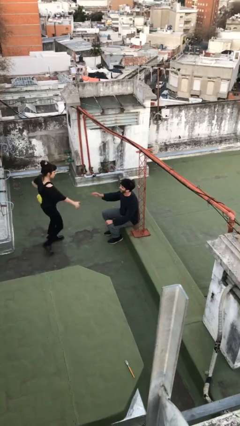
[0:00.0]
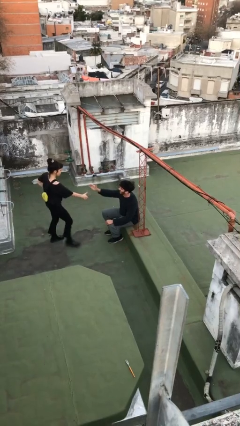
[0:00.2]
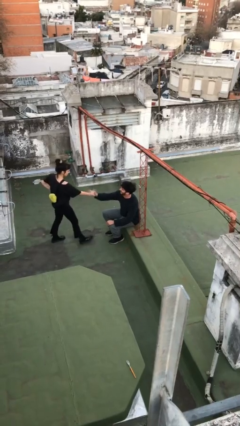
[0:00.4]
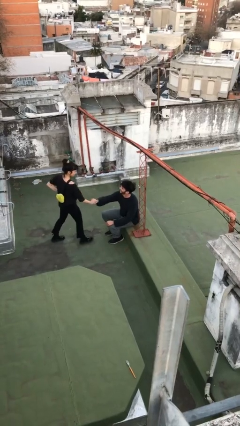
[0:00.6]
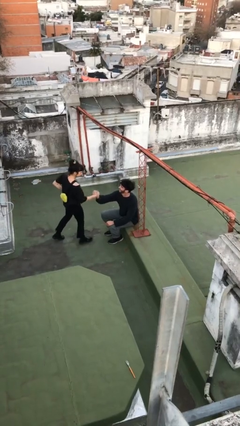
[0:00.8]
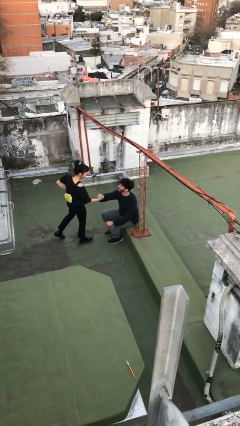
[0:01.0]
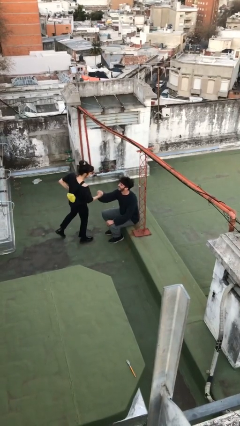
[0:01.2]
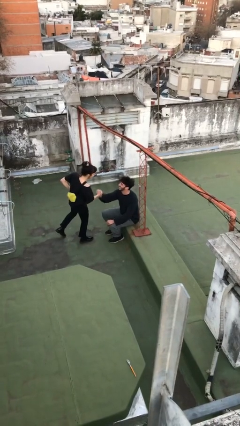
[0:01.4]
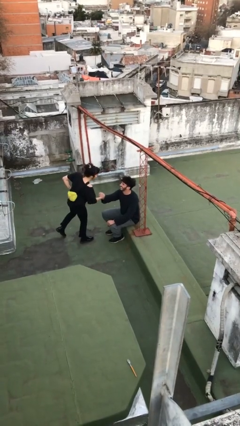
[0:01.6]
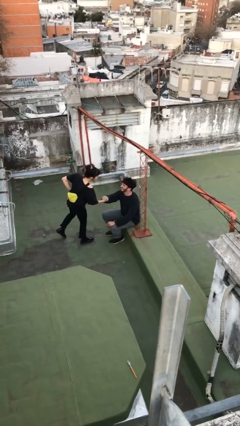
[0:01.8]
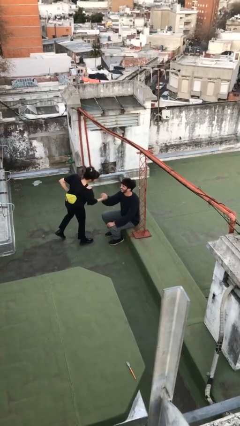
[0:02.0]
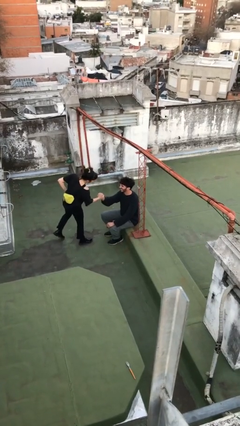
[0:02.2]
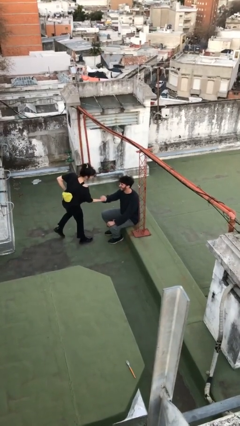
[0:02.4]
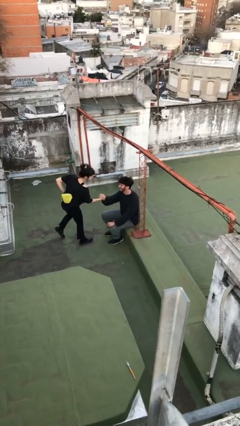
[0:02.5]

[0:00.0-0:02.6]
person shakes hand

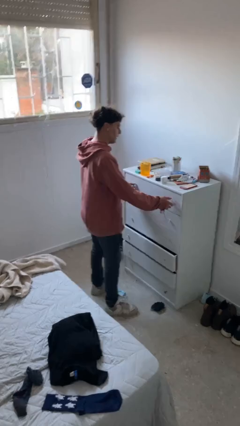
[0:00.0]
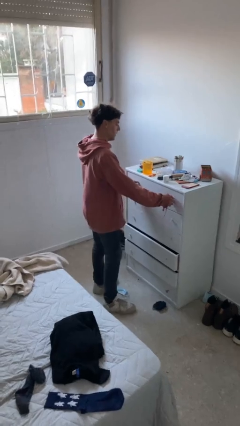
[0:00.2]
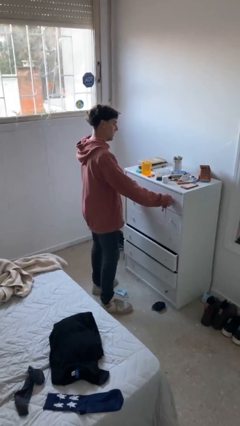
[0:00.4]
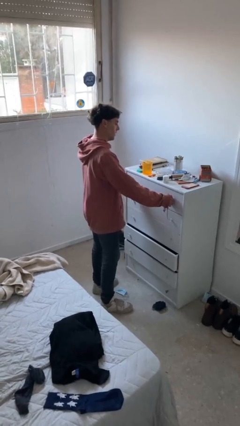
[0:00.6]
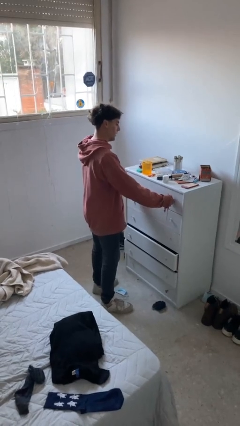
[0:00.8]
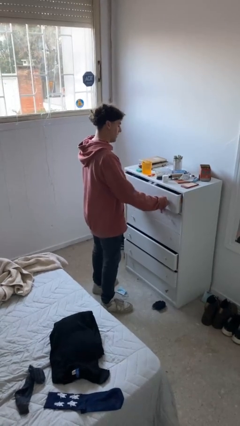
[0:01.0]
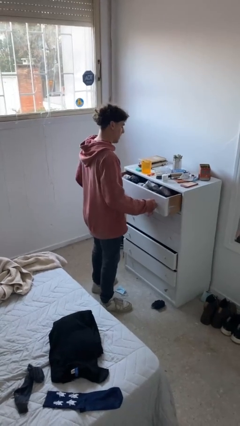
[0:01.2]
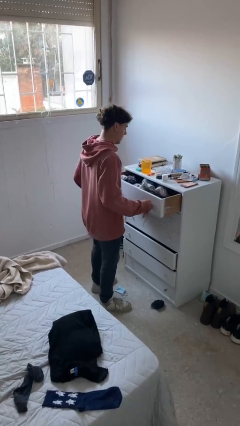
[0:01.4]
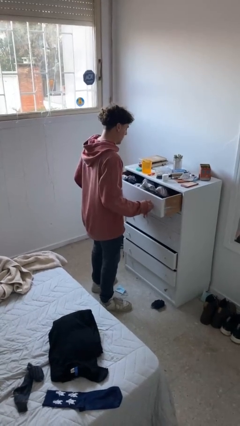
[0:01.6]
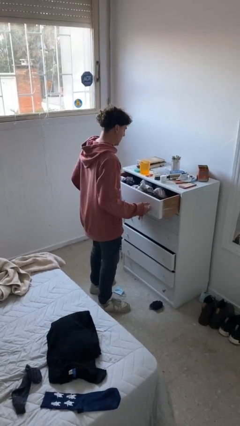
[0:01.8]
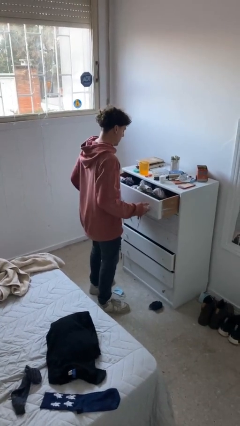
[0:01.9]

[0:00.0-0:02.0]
person opens dresser drawer

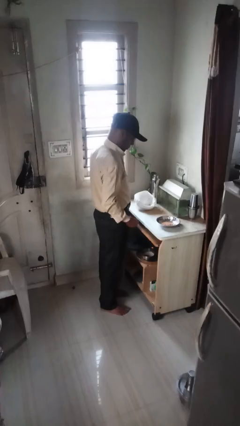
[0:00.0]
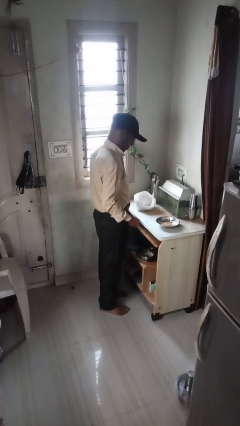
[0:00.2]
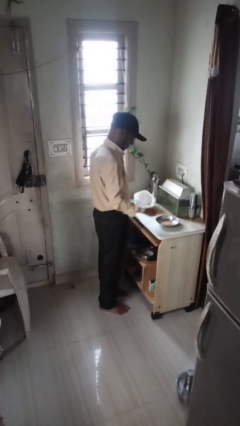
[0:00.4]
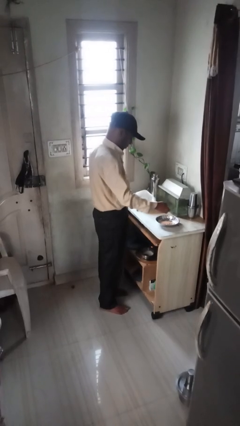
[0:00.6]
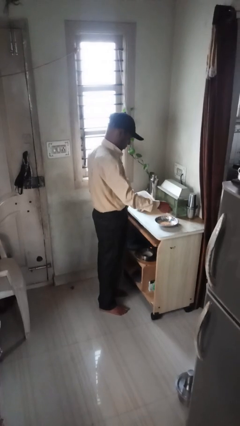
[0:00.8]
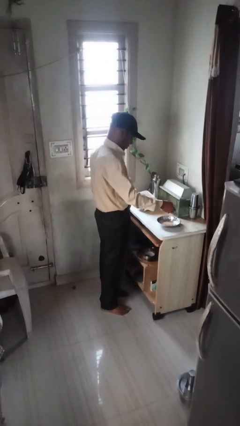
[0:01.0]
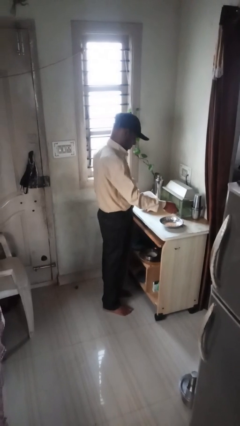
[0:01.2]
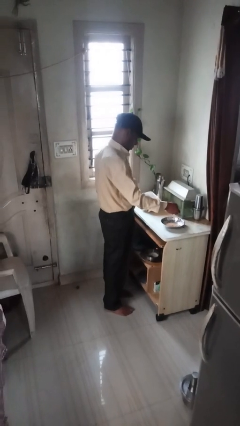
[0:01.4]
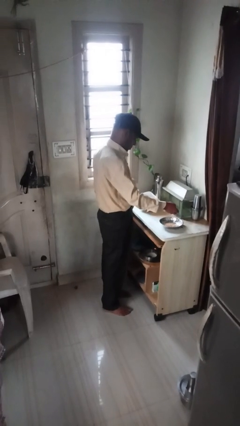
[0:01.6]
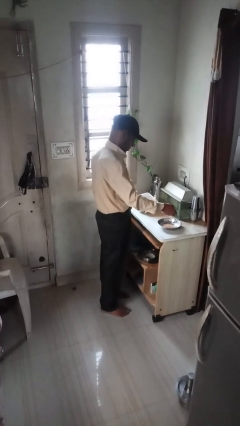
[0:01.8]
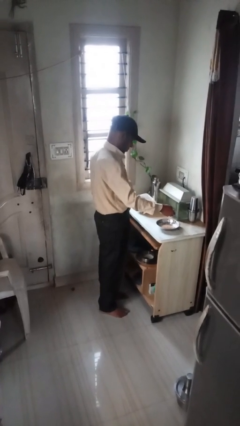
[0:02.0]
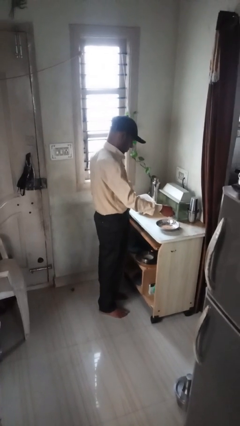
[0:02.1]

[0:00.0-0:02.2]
person pours into bowl

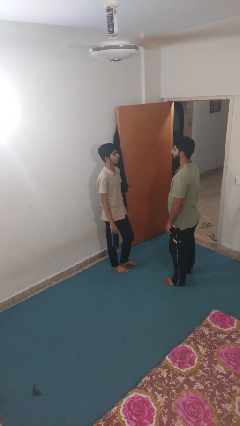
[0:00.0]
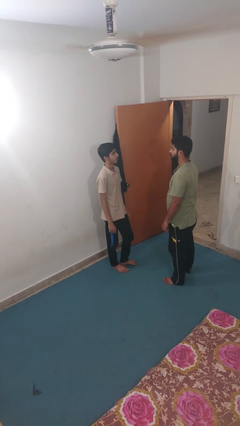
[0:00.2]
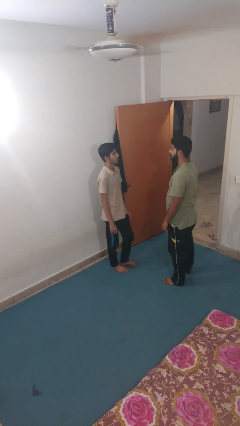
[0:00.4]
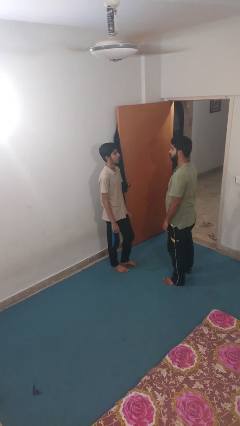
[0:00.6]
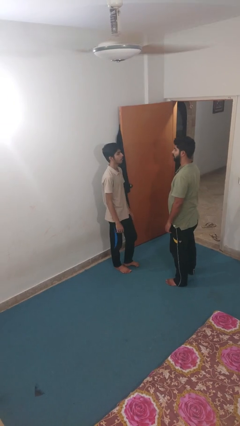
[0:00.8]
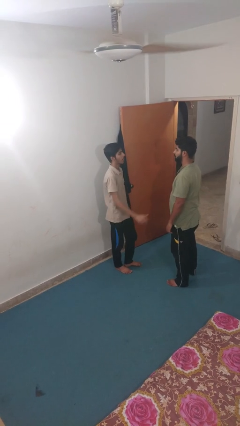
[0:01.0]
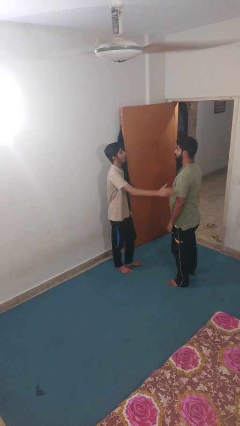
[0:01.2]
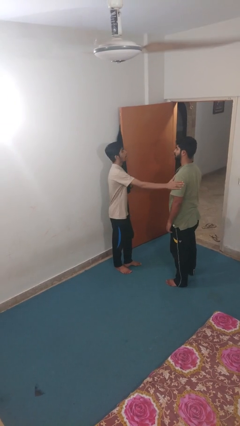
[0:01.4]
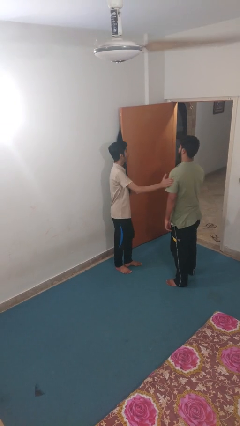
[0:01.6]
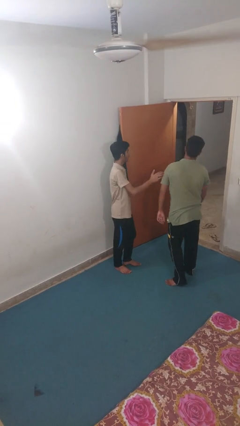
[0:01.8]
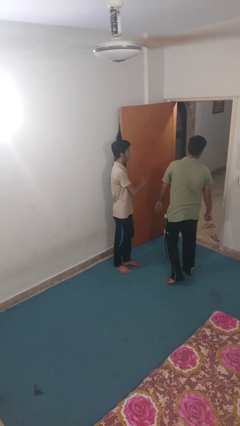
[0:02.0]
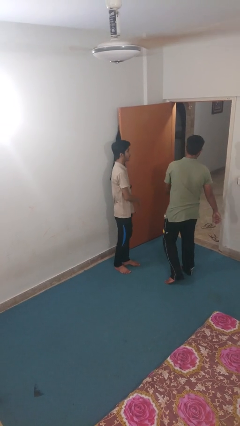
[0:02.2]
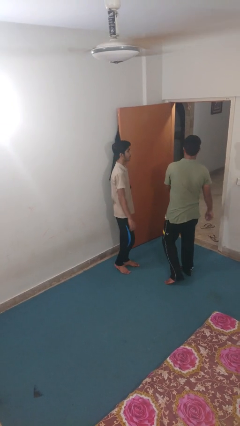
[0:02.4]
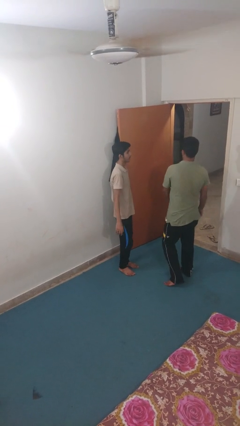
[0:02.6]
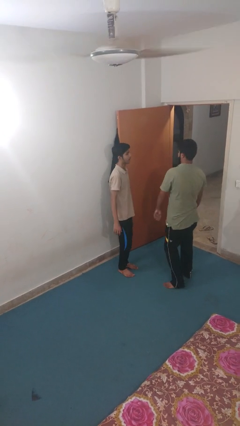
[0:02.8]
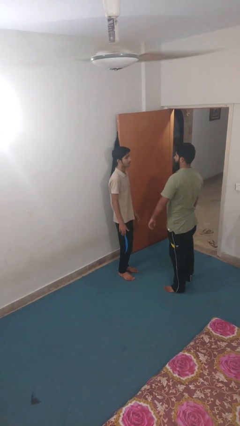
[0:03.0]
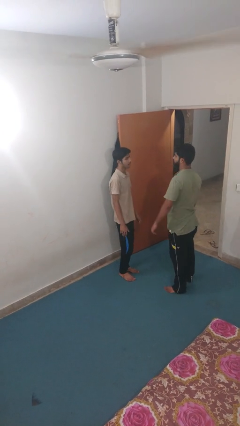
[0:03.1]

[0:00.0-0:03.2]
person shoves person

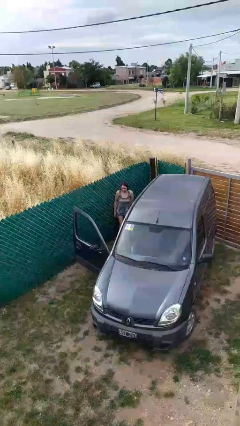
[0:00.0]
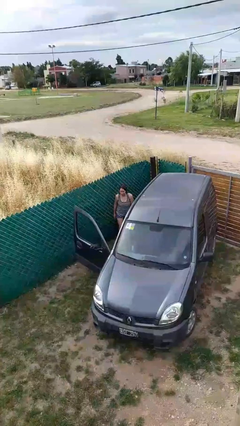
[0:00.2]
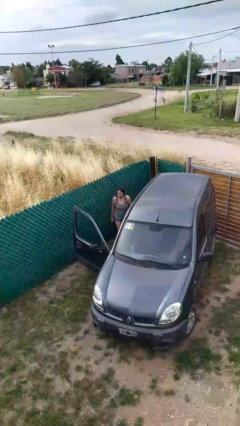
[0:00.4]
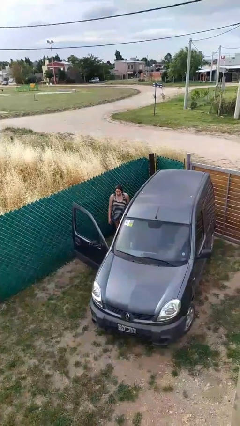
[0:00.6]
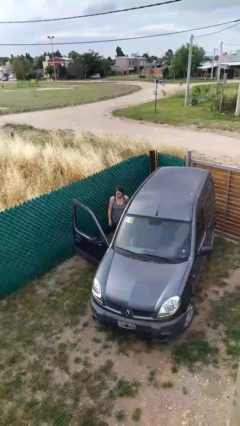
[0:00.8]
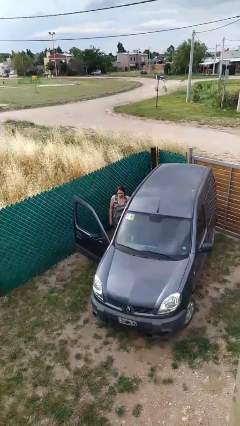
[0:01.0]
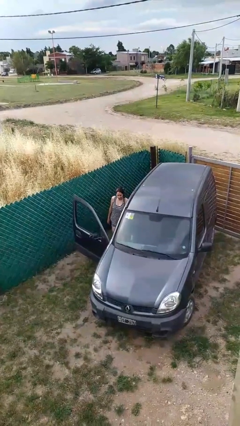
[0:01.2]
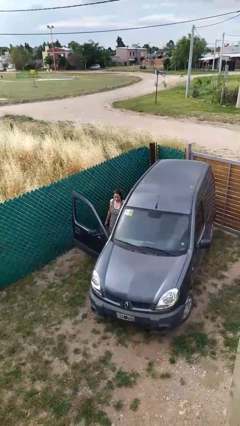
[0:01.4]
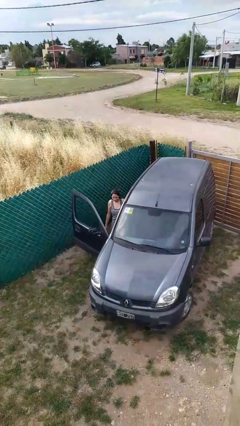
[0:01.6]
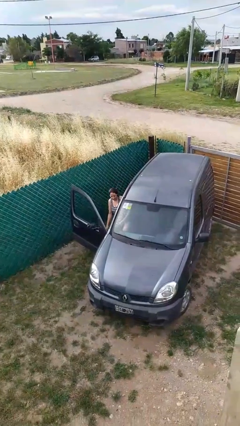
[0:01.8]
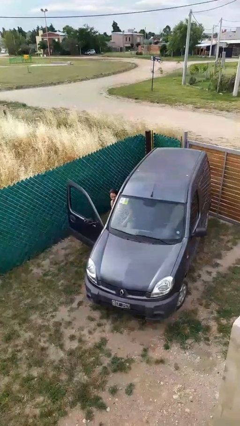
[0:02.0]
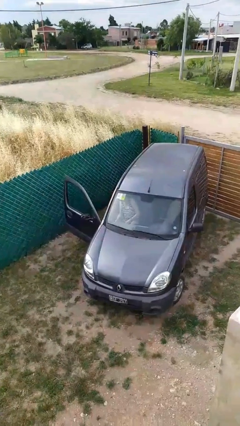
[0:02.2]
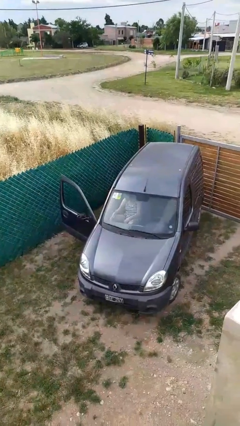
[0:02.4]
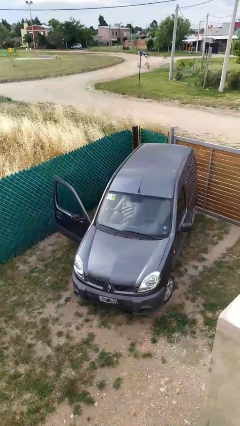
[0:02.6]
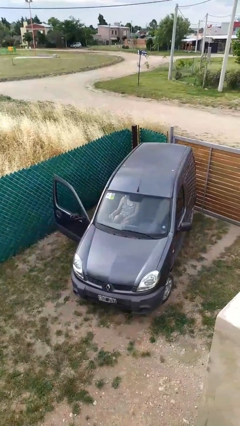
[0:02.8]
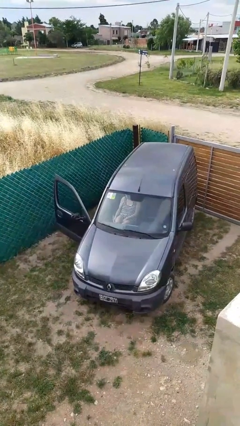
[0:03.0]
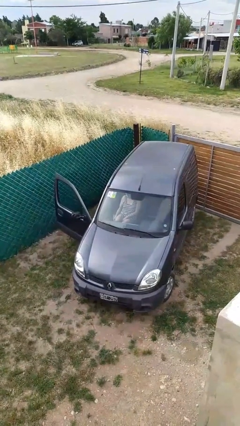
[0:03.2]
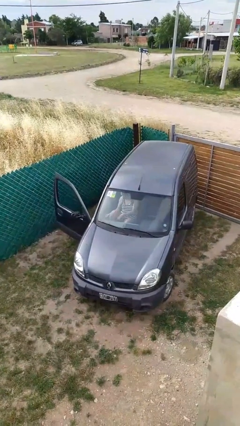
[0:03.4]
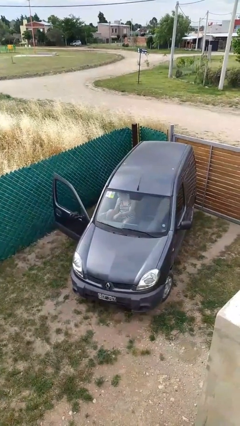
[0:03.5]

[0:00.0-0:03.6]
person enters car

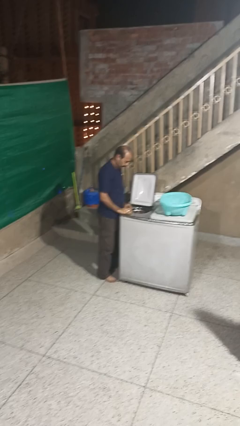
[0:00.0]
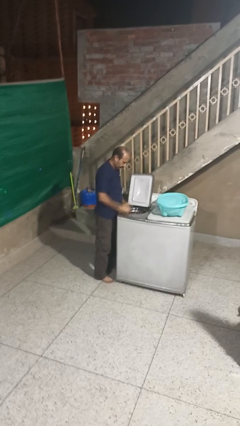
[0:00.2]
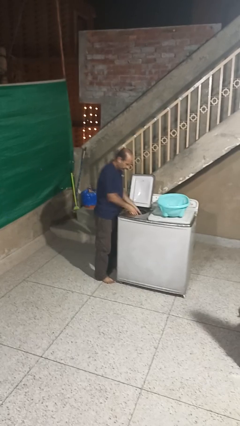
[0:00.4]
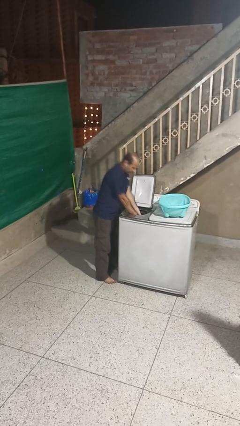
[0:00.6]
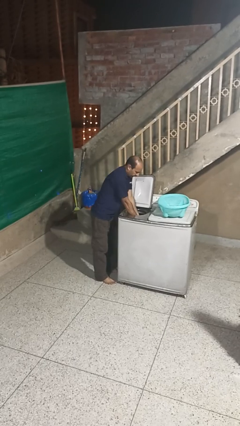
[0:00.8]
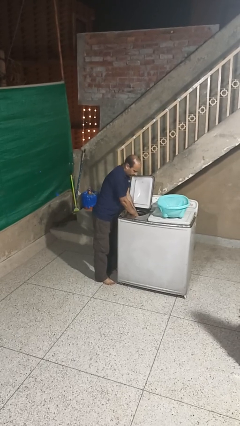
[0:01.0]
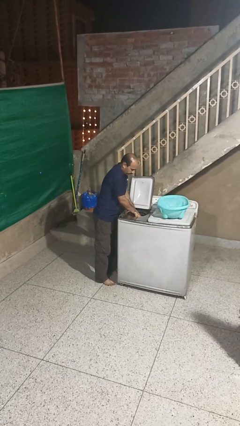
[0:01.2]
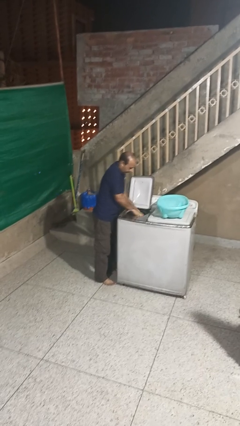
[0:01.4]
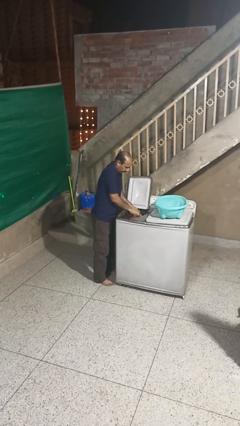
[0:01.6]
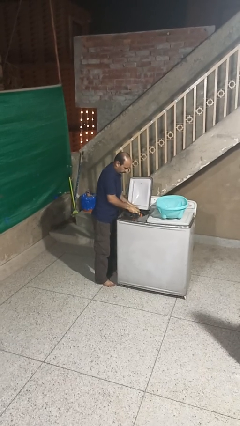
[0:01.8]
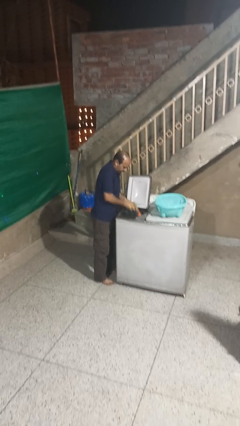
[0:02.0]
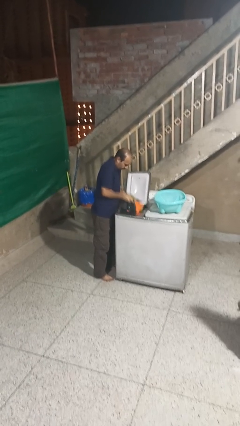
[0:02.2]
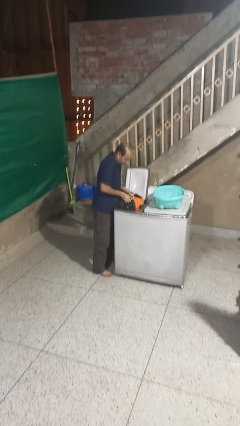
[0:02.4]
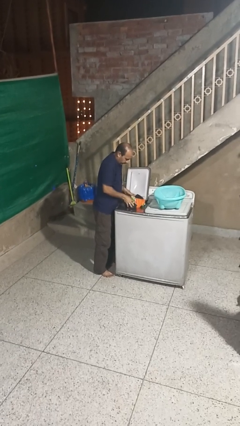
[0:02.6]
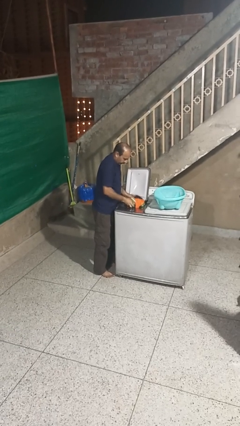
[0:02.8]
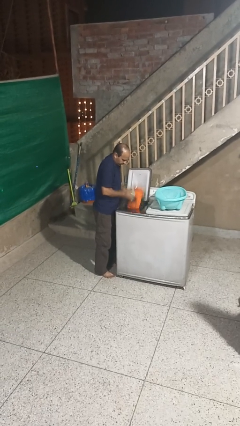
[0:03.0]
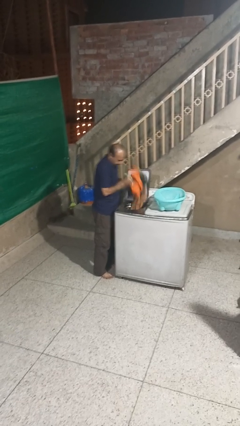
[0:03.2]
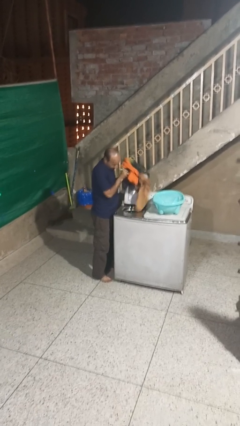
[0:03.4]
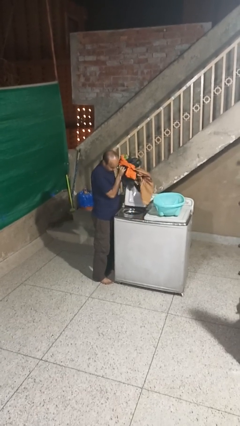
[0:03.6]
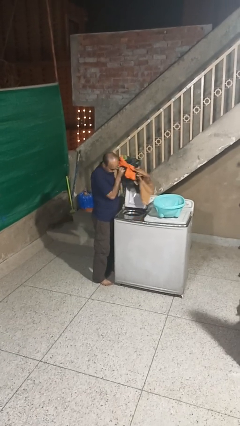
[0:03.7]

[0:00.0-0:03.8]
person unloads dryer
